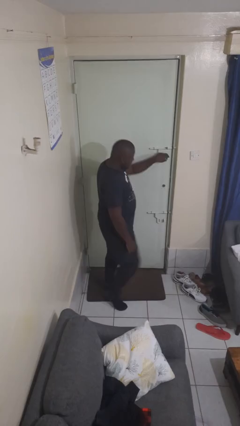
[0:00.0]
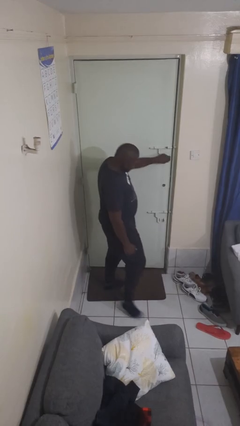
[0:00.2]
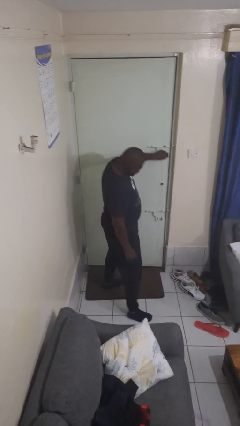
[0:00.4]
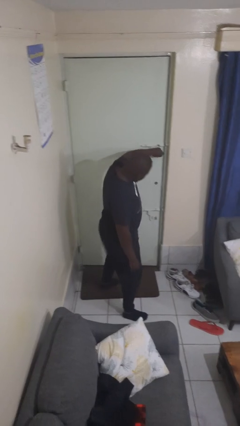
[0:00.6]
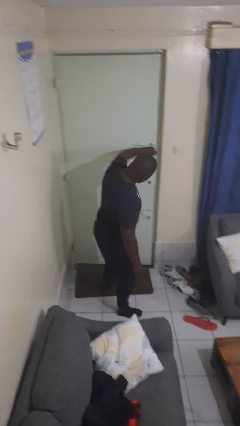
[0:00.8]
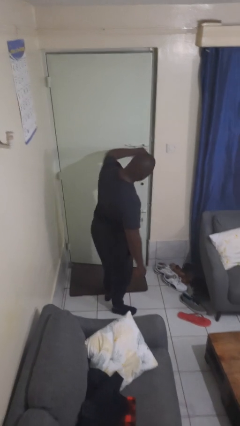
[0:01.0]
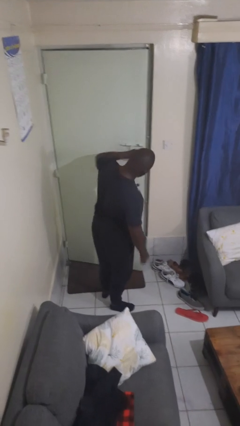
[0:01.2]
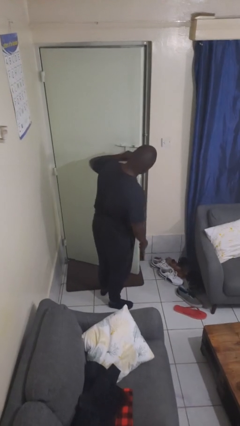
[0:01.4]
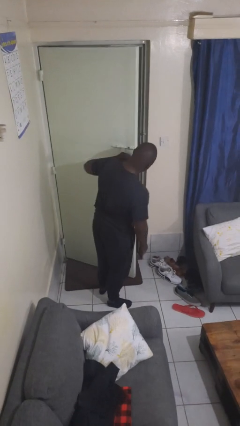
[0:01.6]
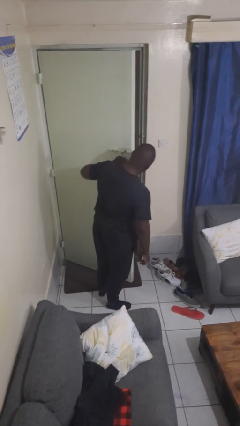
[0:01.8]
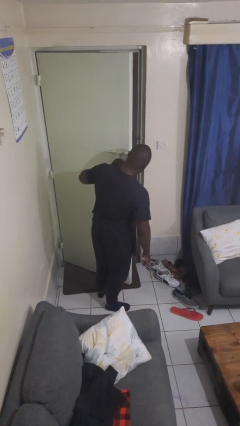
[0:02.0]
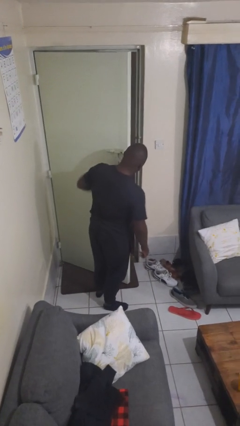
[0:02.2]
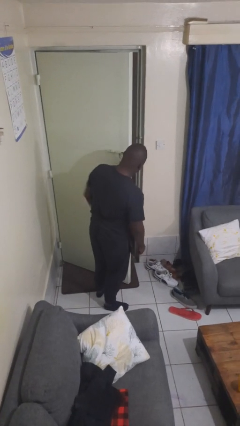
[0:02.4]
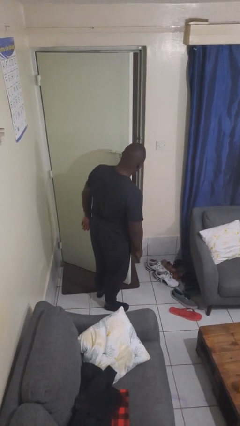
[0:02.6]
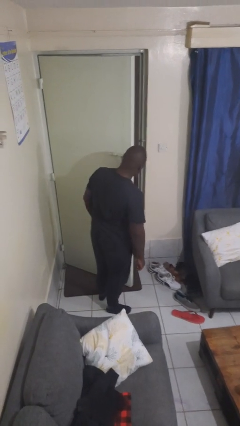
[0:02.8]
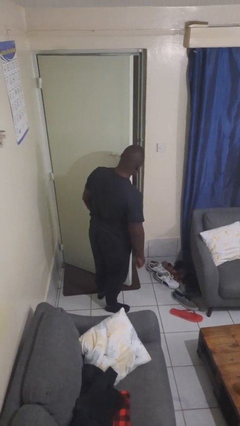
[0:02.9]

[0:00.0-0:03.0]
person opens facility door

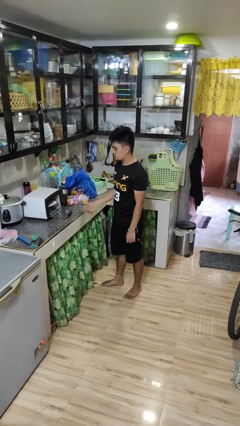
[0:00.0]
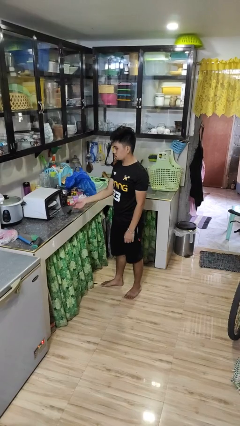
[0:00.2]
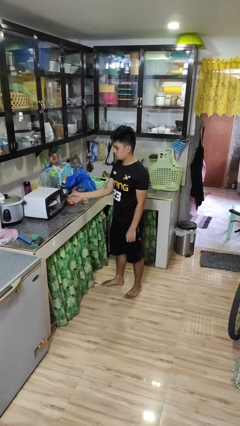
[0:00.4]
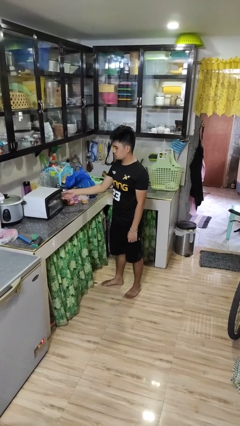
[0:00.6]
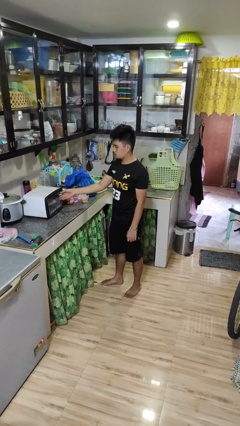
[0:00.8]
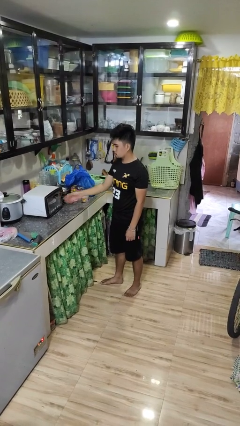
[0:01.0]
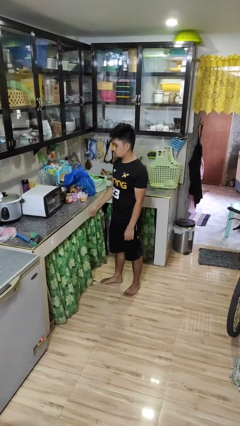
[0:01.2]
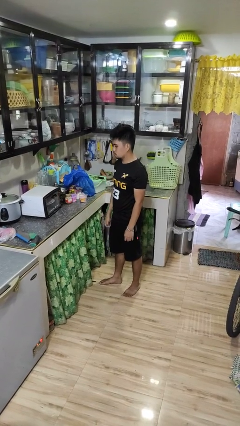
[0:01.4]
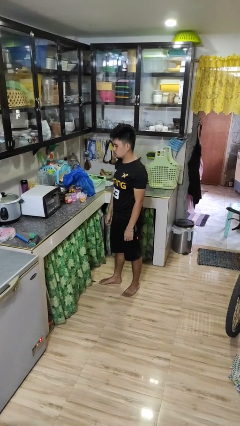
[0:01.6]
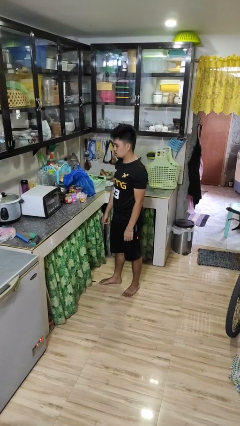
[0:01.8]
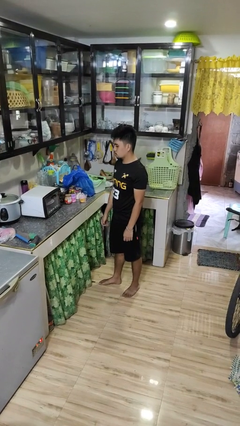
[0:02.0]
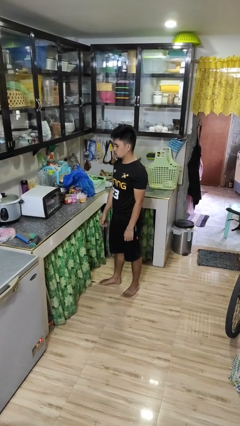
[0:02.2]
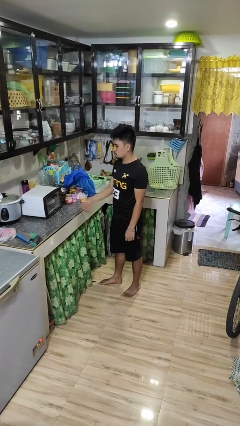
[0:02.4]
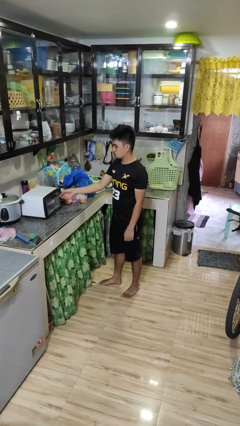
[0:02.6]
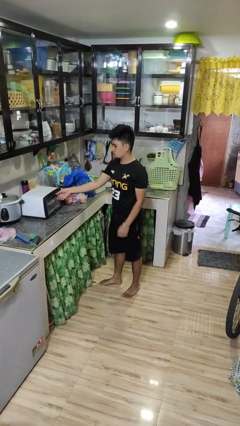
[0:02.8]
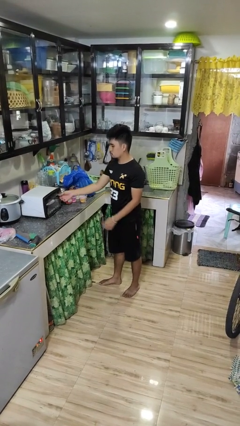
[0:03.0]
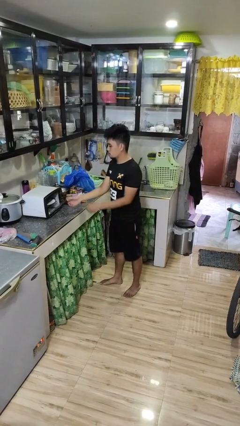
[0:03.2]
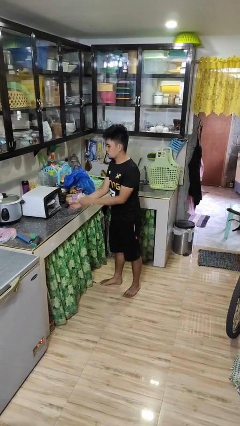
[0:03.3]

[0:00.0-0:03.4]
person closes microwave

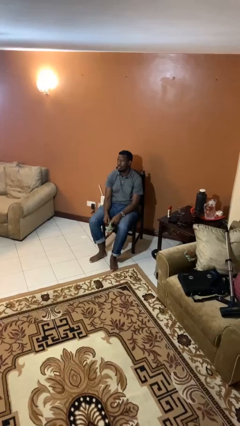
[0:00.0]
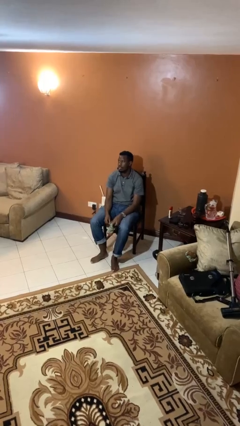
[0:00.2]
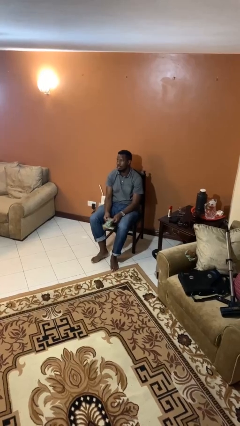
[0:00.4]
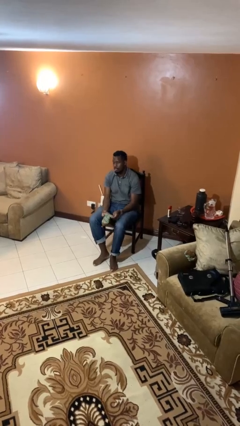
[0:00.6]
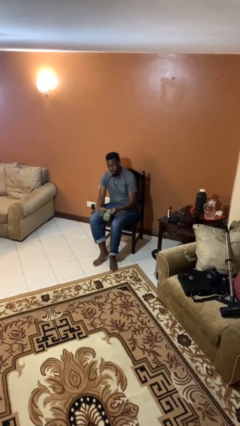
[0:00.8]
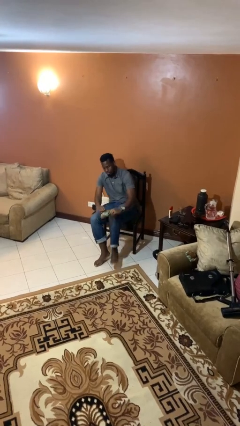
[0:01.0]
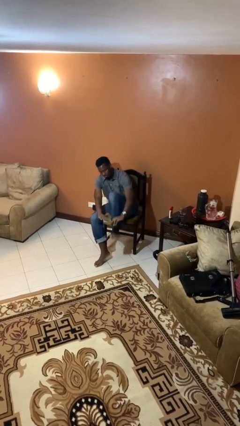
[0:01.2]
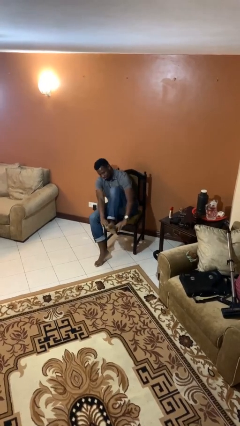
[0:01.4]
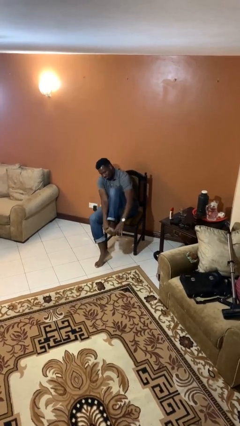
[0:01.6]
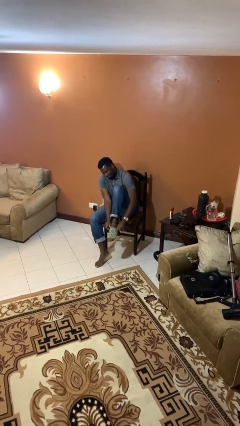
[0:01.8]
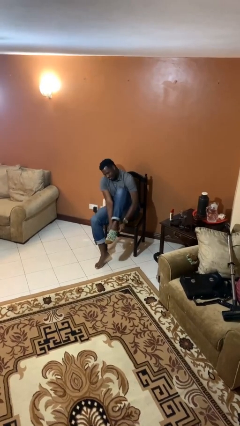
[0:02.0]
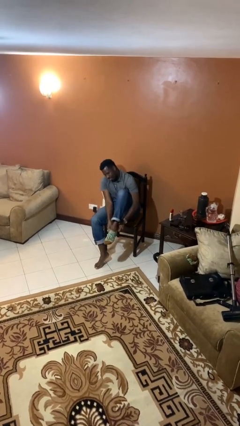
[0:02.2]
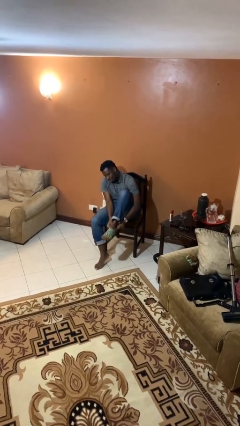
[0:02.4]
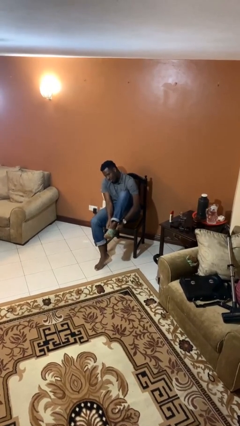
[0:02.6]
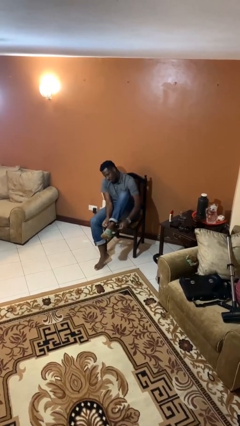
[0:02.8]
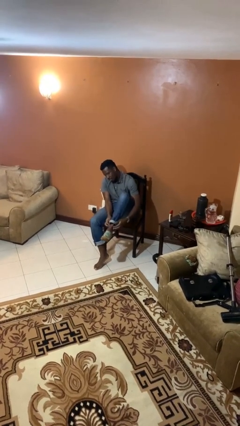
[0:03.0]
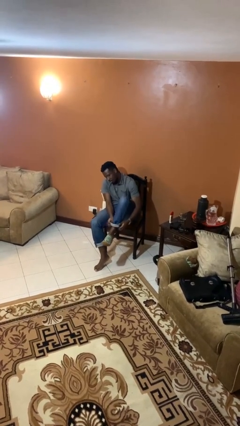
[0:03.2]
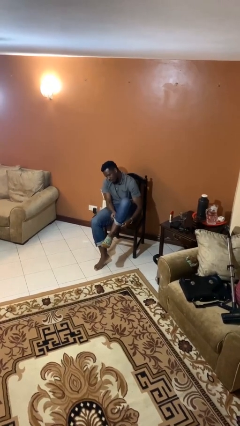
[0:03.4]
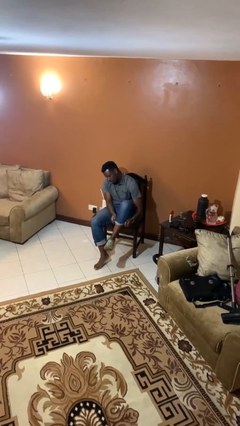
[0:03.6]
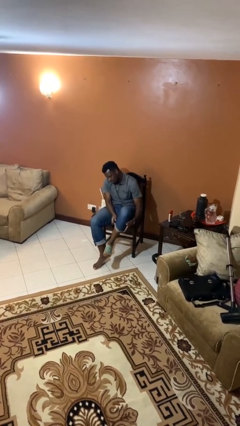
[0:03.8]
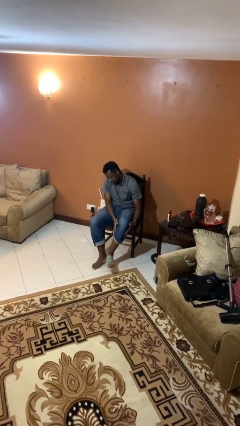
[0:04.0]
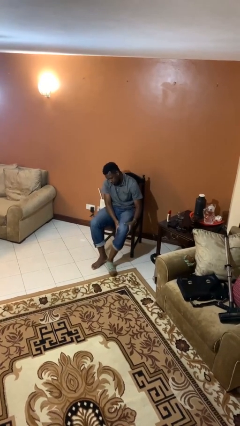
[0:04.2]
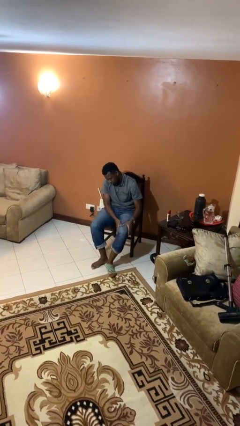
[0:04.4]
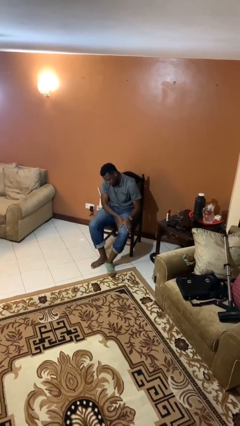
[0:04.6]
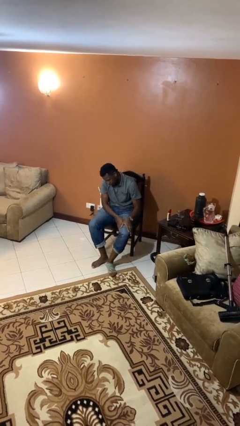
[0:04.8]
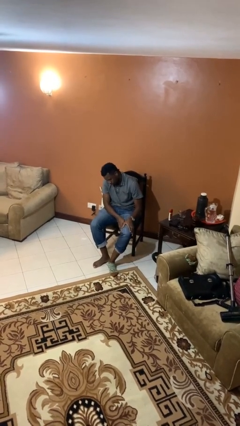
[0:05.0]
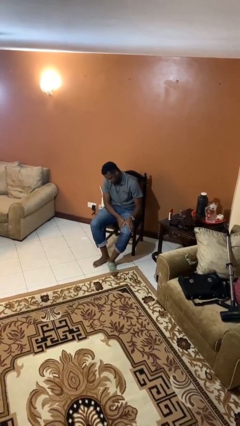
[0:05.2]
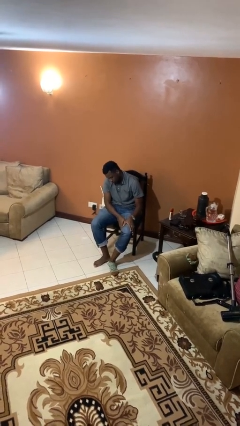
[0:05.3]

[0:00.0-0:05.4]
person puts on socks

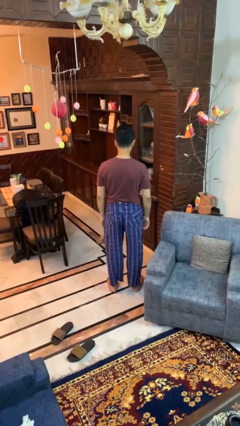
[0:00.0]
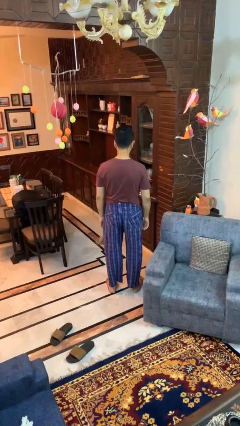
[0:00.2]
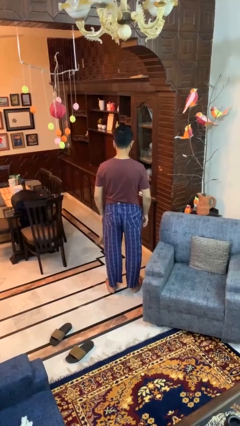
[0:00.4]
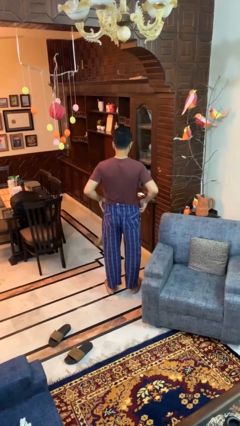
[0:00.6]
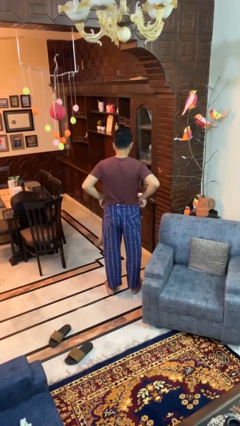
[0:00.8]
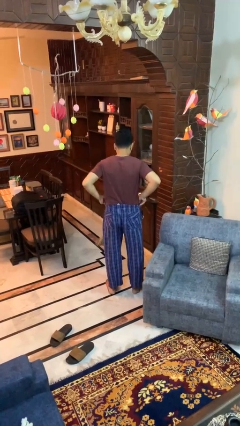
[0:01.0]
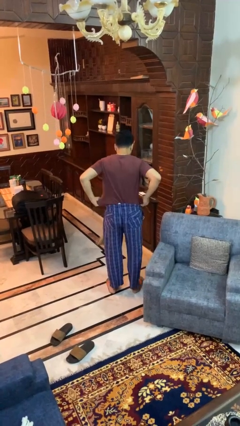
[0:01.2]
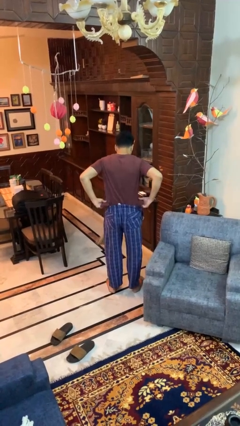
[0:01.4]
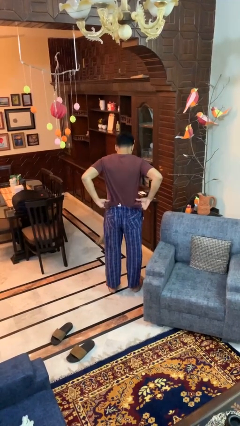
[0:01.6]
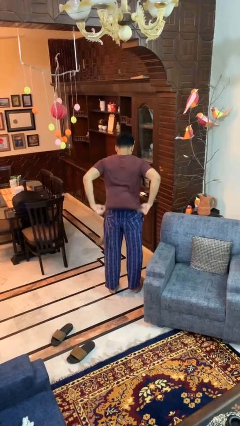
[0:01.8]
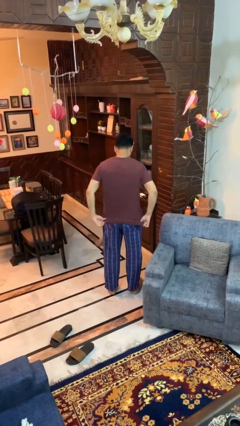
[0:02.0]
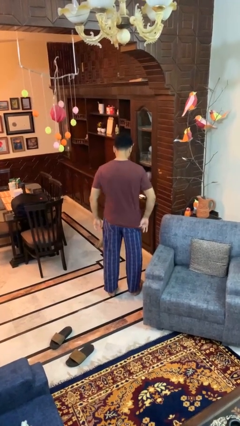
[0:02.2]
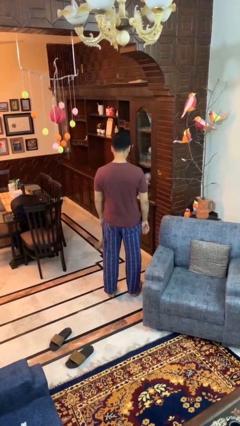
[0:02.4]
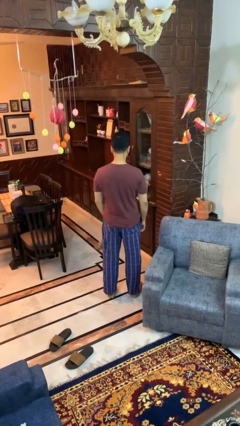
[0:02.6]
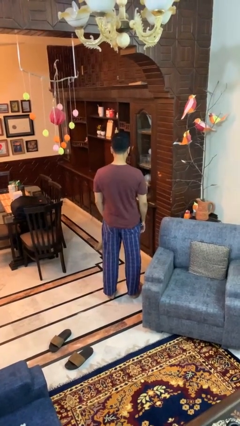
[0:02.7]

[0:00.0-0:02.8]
person untucks shirt

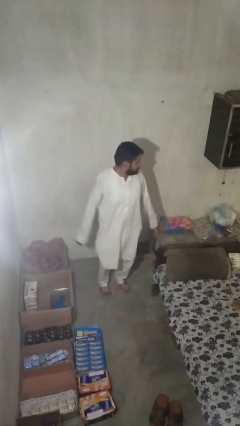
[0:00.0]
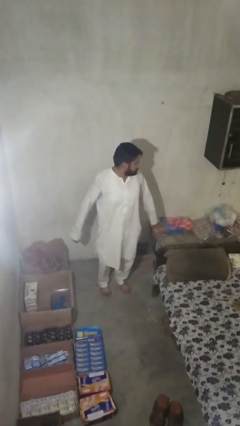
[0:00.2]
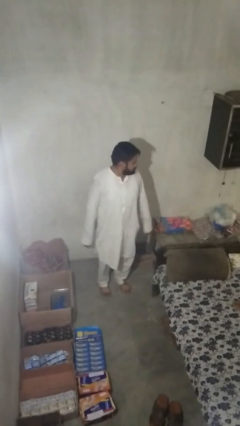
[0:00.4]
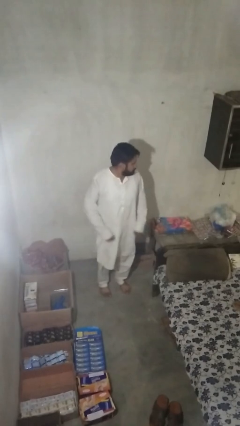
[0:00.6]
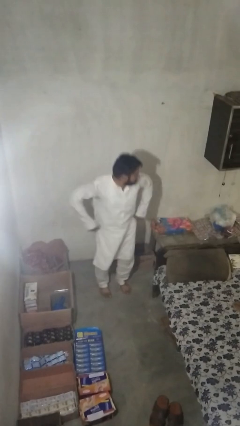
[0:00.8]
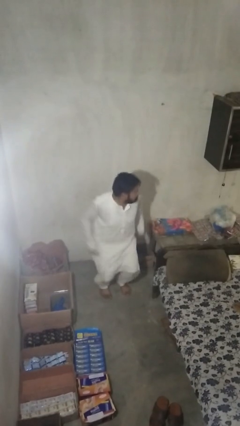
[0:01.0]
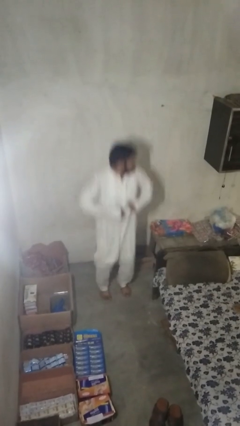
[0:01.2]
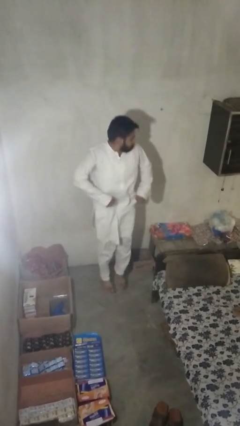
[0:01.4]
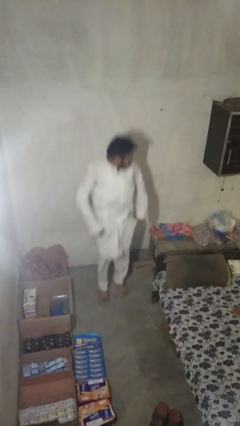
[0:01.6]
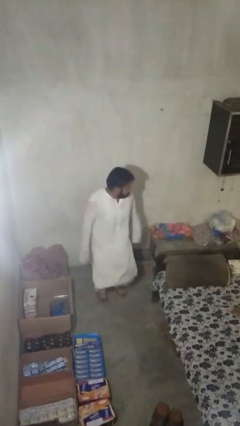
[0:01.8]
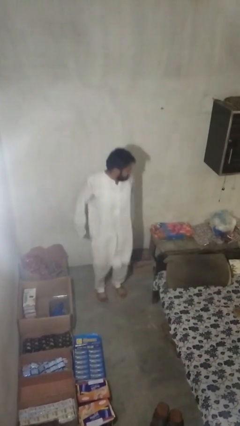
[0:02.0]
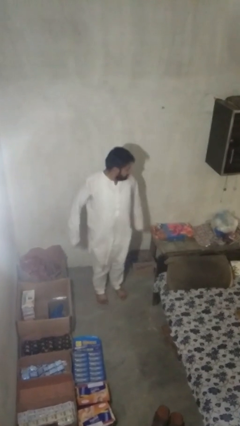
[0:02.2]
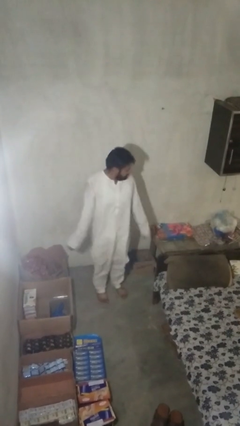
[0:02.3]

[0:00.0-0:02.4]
person jumps

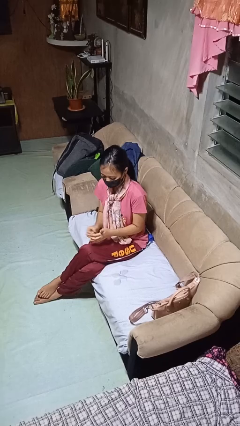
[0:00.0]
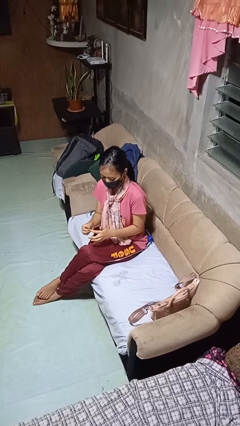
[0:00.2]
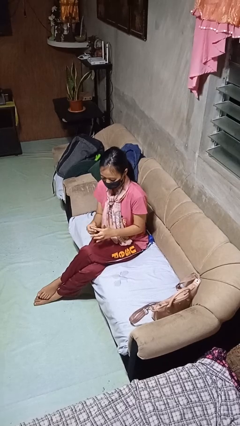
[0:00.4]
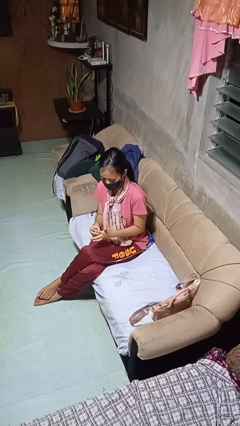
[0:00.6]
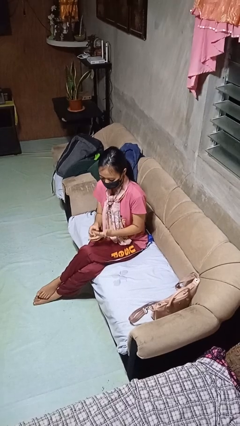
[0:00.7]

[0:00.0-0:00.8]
person puts on ring
